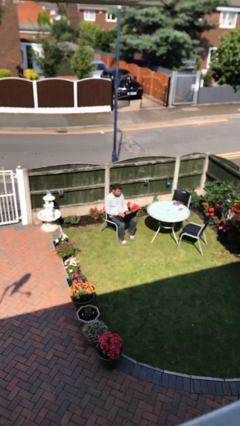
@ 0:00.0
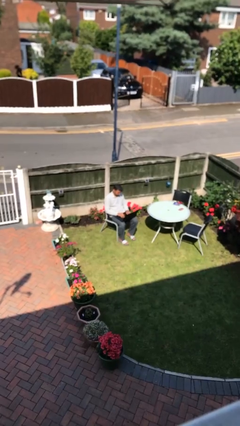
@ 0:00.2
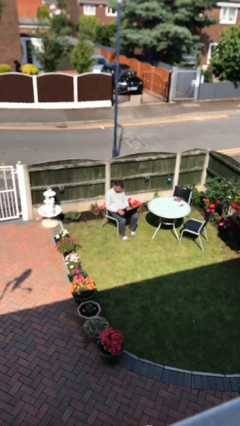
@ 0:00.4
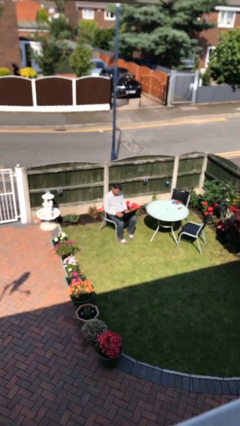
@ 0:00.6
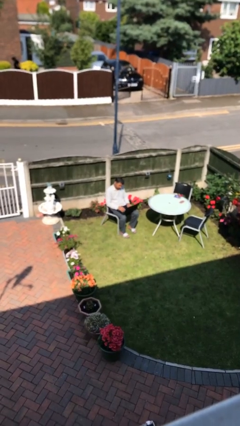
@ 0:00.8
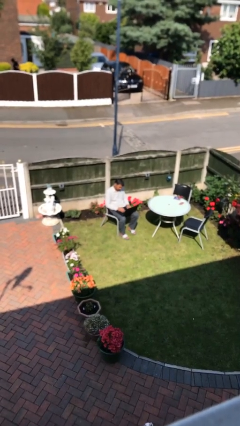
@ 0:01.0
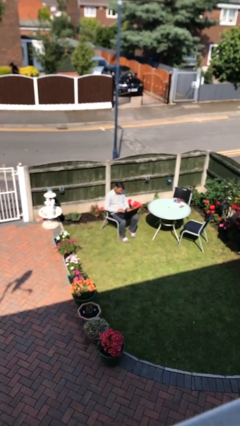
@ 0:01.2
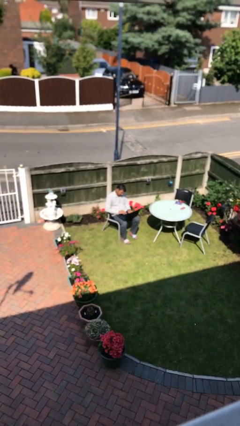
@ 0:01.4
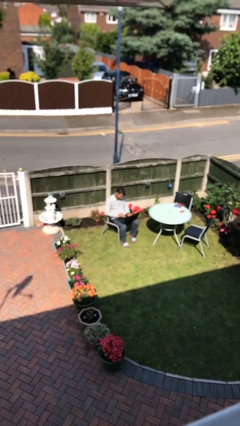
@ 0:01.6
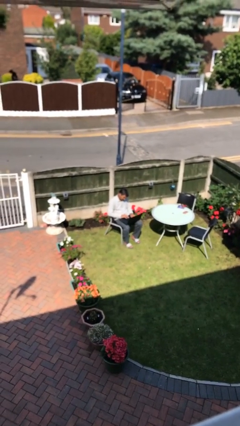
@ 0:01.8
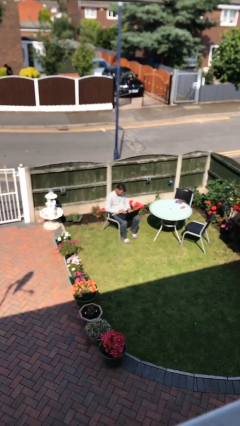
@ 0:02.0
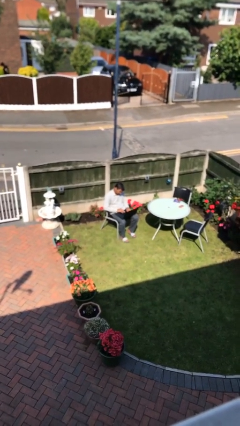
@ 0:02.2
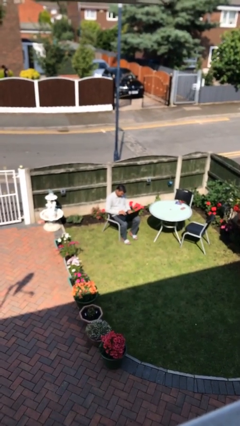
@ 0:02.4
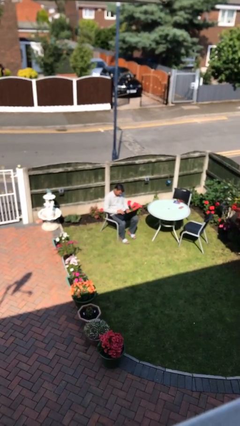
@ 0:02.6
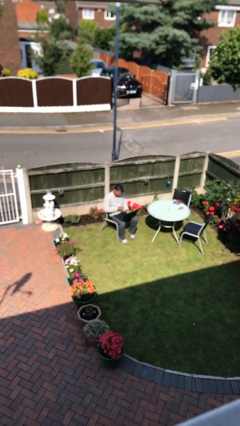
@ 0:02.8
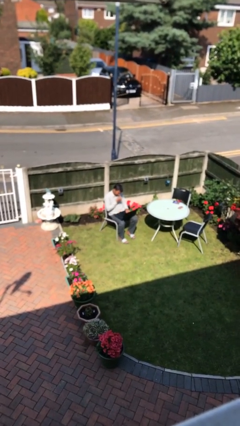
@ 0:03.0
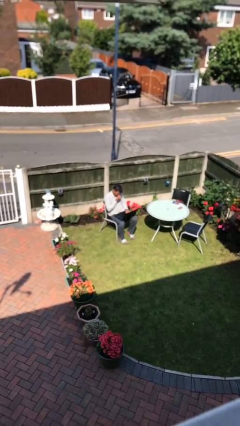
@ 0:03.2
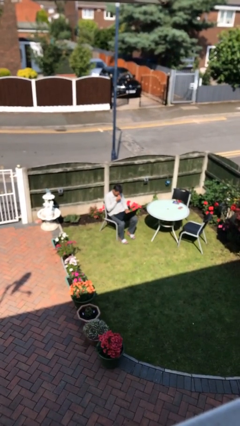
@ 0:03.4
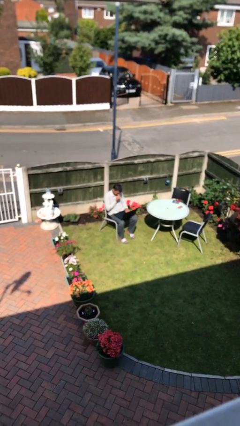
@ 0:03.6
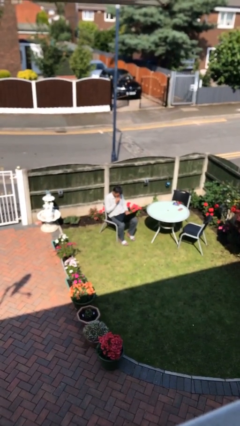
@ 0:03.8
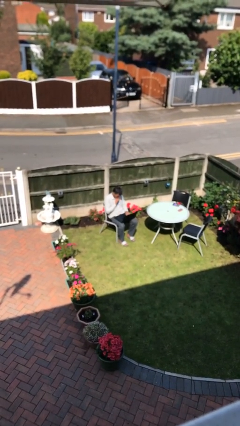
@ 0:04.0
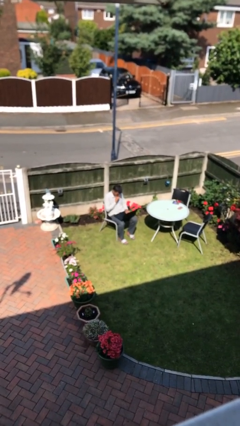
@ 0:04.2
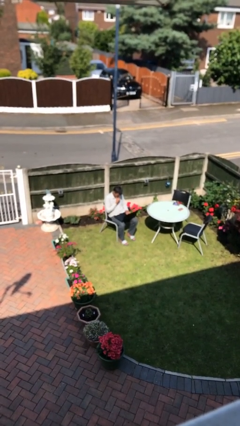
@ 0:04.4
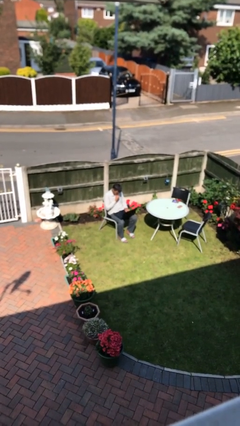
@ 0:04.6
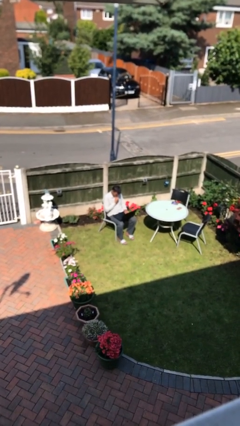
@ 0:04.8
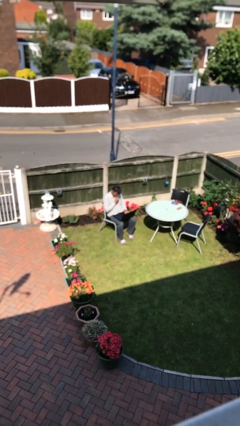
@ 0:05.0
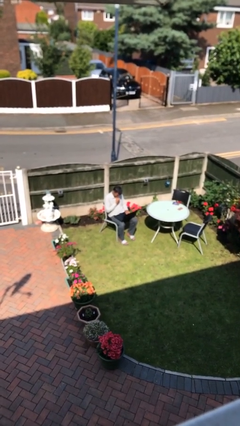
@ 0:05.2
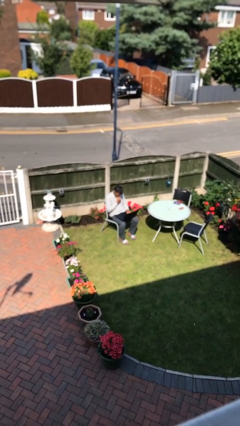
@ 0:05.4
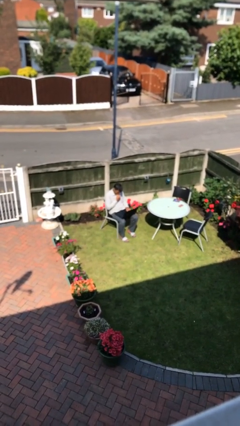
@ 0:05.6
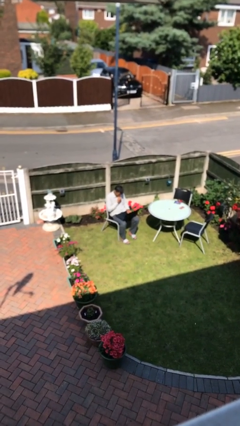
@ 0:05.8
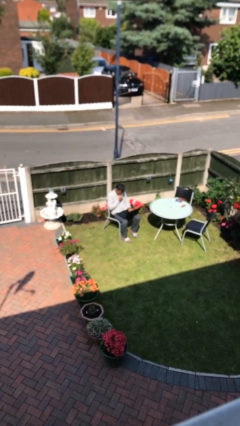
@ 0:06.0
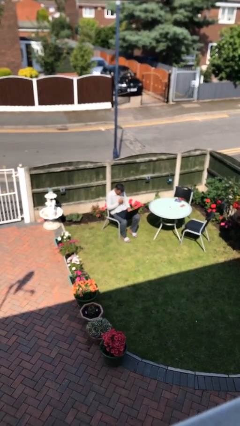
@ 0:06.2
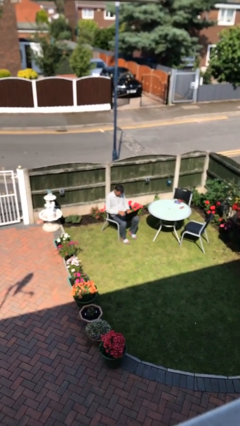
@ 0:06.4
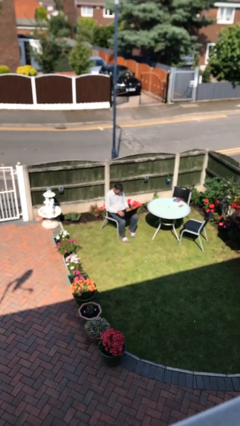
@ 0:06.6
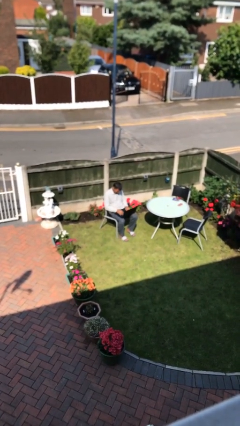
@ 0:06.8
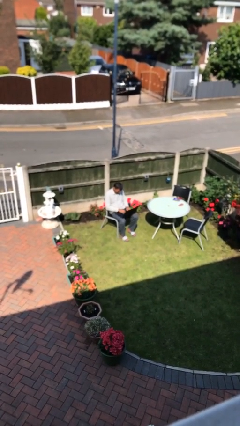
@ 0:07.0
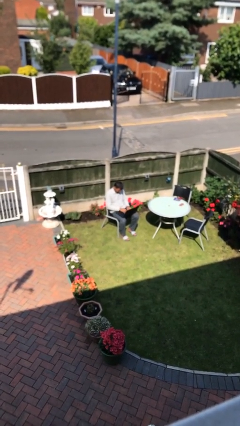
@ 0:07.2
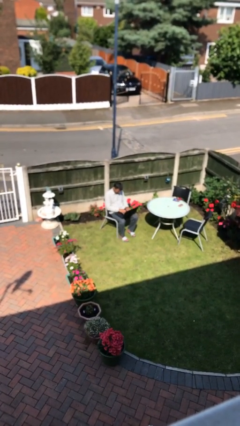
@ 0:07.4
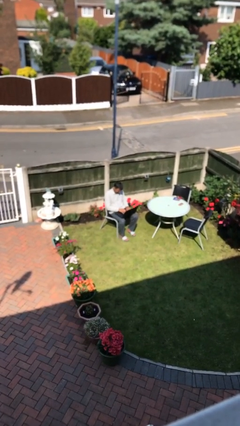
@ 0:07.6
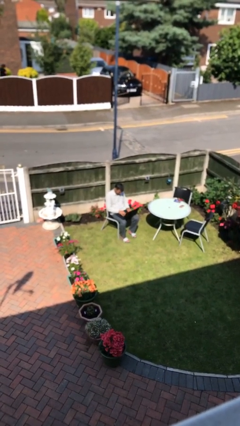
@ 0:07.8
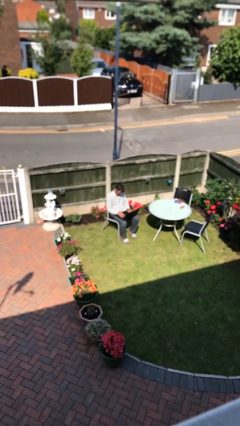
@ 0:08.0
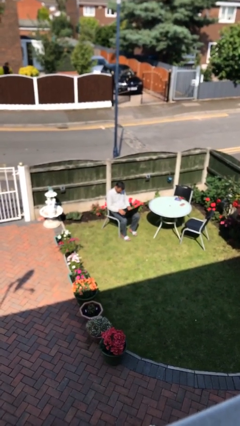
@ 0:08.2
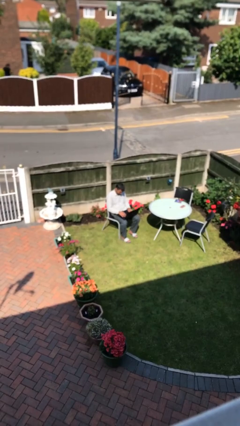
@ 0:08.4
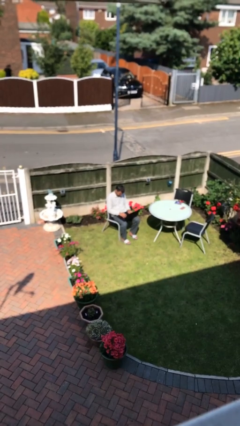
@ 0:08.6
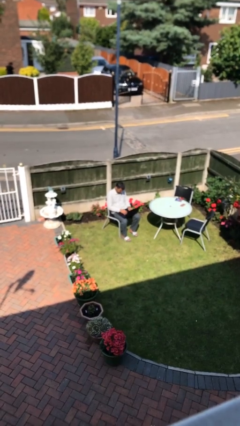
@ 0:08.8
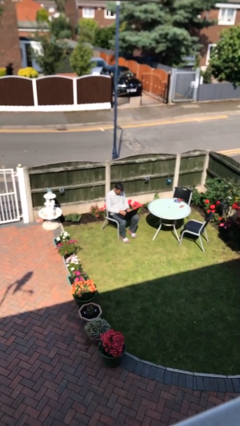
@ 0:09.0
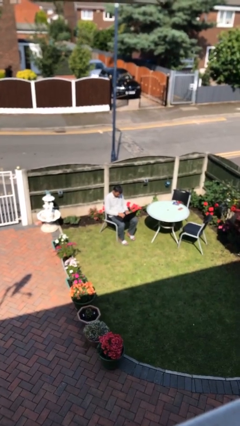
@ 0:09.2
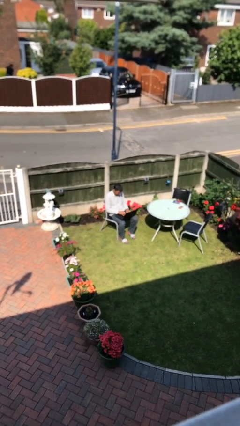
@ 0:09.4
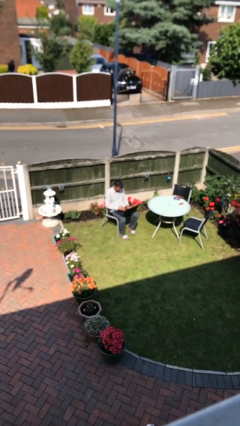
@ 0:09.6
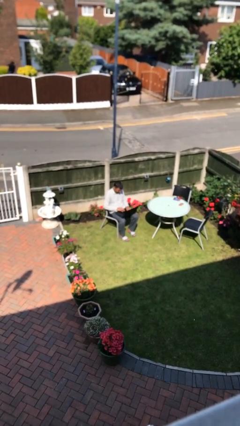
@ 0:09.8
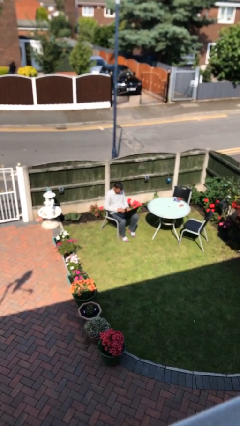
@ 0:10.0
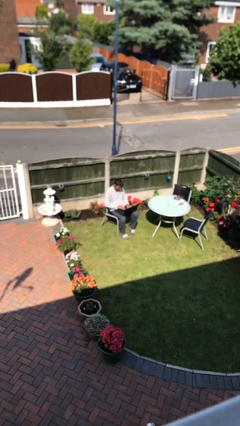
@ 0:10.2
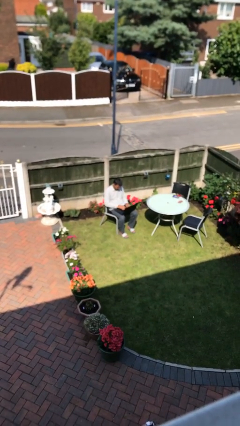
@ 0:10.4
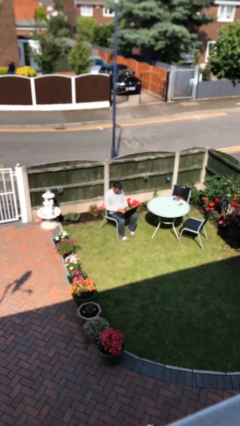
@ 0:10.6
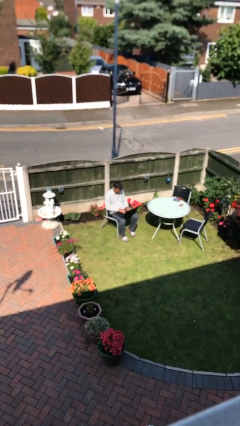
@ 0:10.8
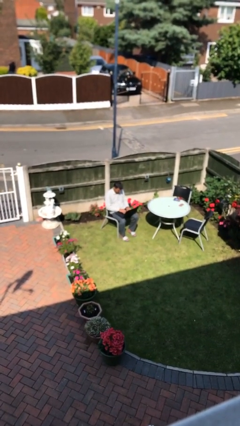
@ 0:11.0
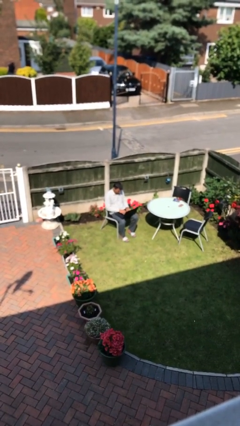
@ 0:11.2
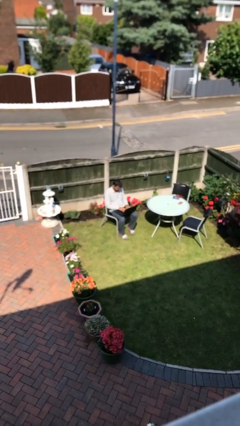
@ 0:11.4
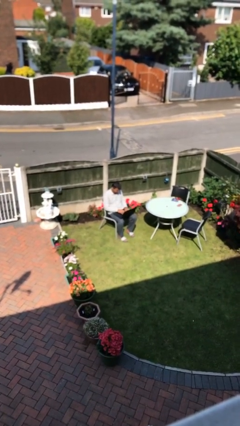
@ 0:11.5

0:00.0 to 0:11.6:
person interacts with laptop

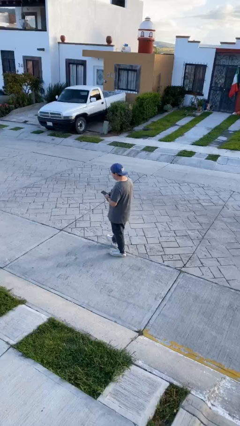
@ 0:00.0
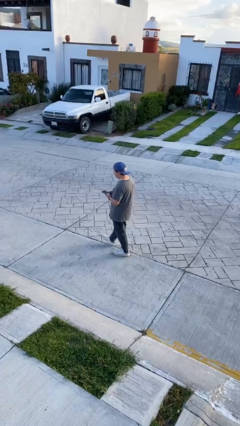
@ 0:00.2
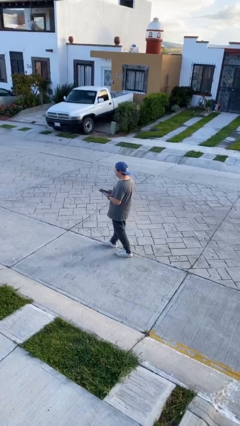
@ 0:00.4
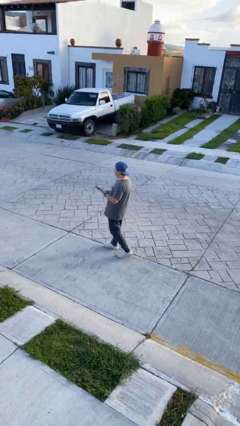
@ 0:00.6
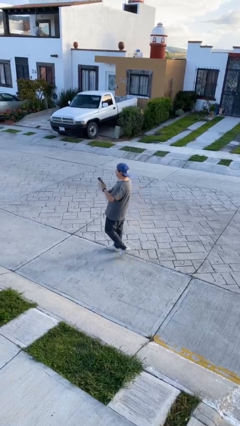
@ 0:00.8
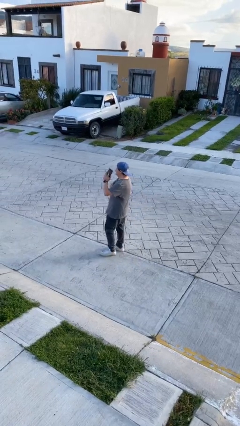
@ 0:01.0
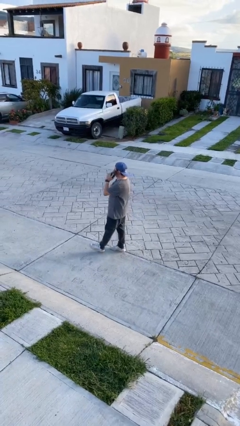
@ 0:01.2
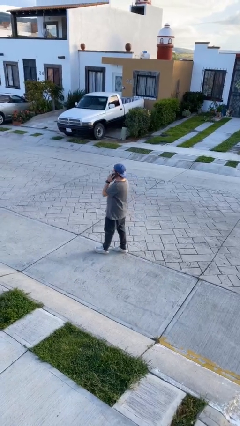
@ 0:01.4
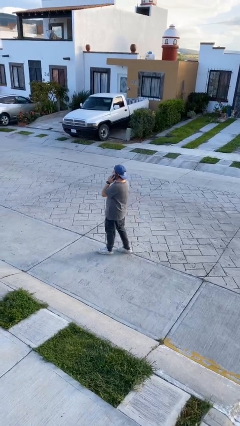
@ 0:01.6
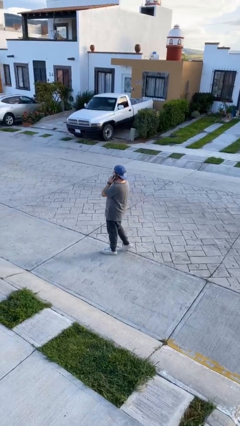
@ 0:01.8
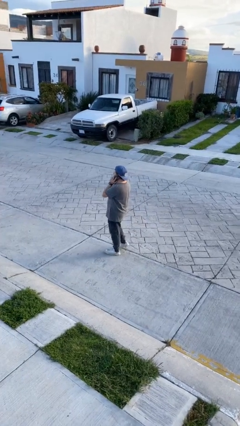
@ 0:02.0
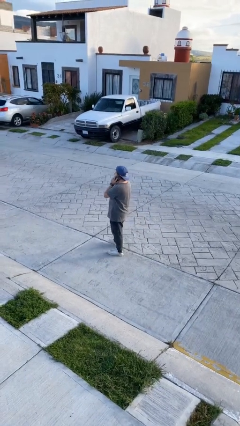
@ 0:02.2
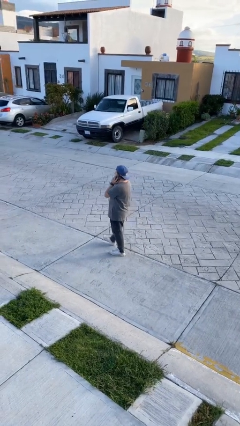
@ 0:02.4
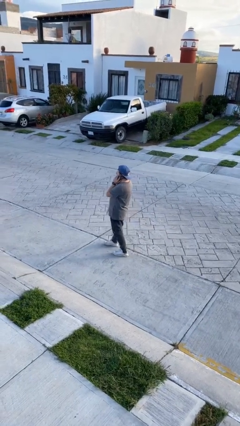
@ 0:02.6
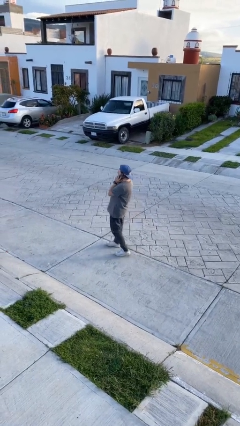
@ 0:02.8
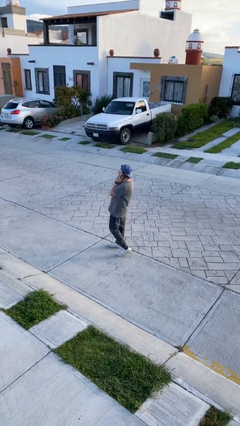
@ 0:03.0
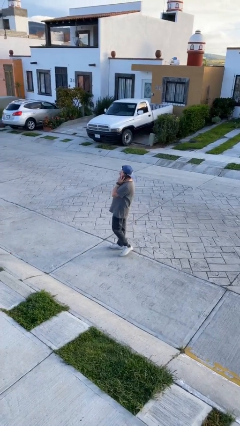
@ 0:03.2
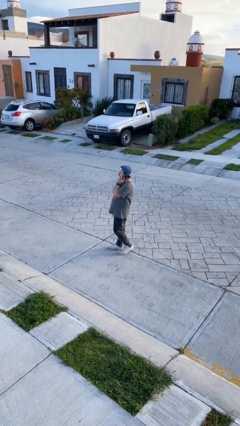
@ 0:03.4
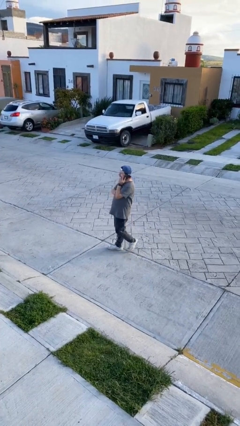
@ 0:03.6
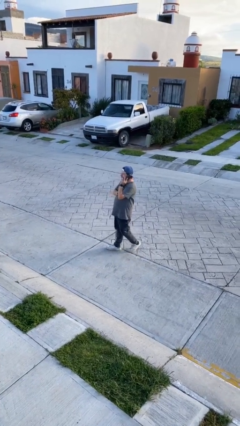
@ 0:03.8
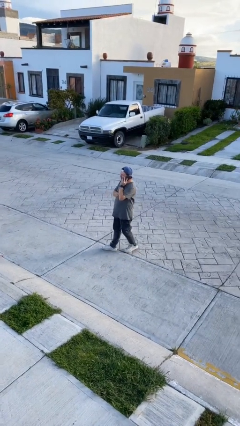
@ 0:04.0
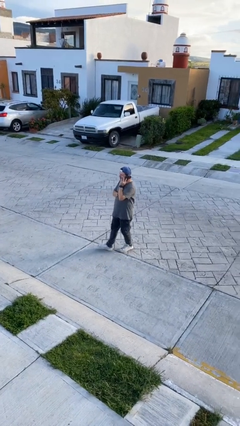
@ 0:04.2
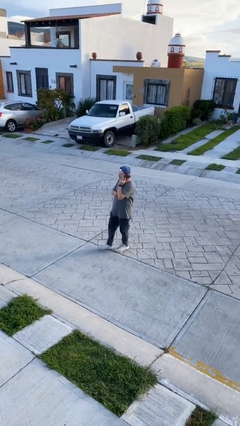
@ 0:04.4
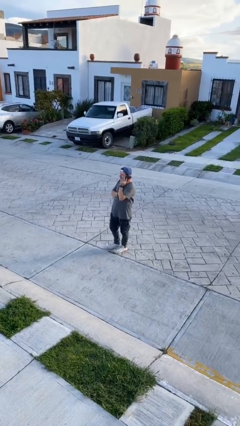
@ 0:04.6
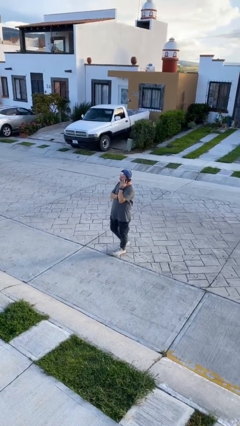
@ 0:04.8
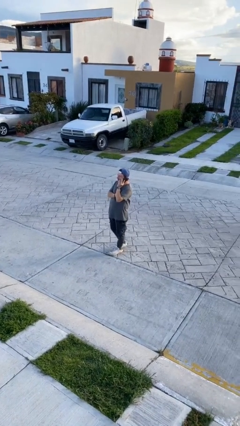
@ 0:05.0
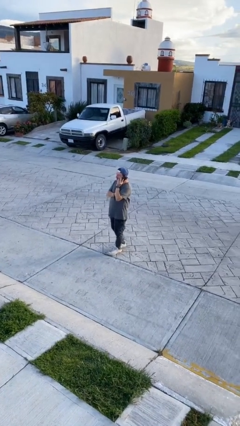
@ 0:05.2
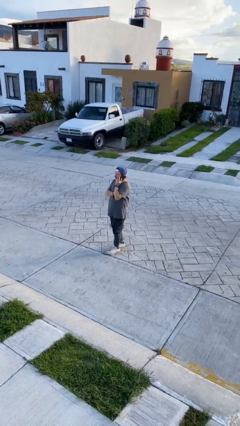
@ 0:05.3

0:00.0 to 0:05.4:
person talks on phone

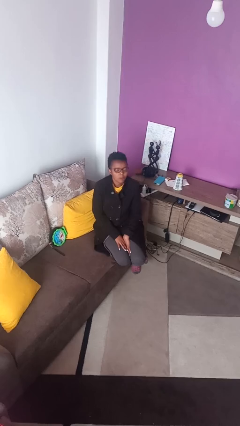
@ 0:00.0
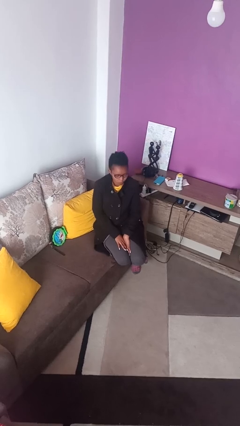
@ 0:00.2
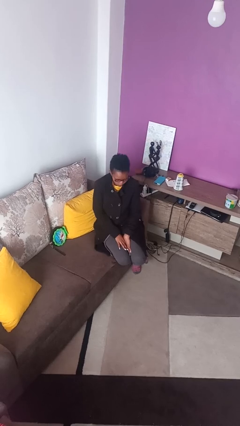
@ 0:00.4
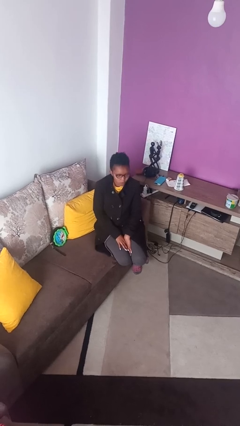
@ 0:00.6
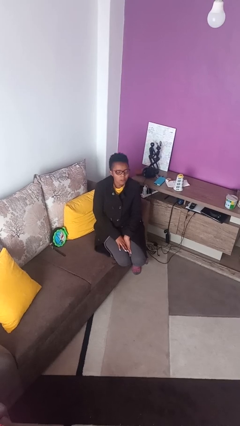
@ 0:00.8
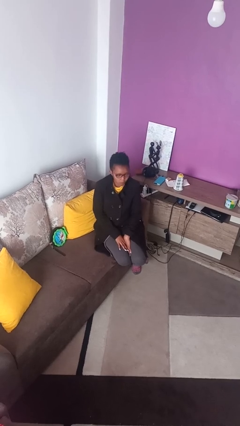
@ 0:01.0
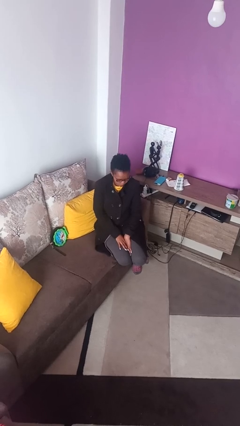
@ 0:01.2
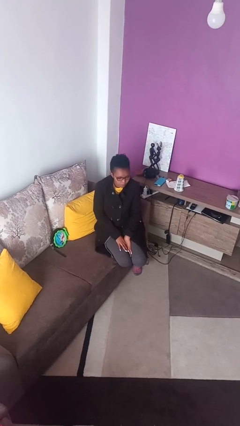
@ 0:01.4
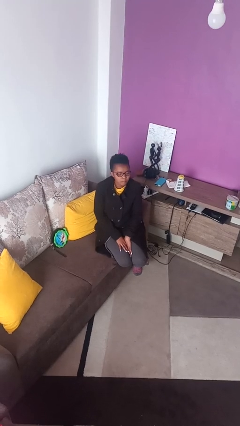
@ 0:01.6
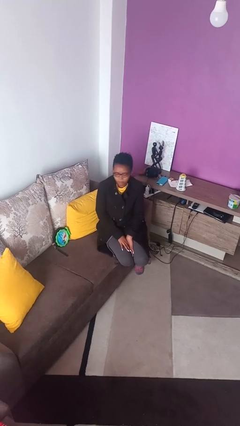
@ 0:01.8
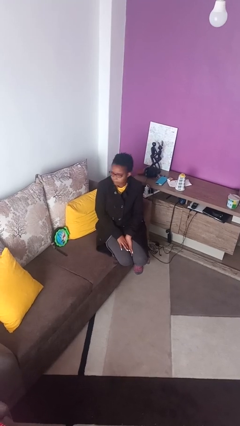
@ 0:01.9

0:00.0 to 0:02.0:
person nods head
